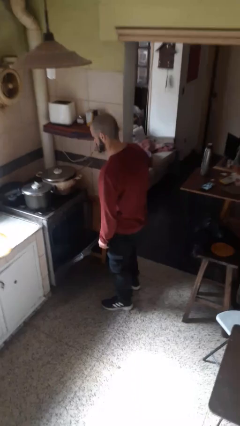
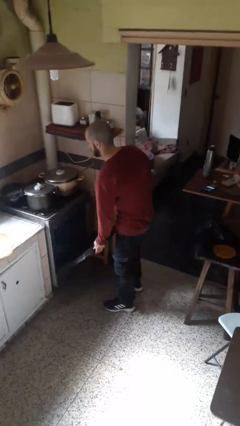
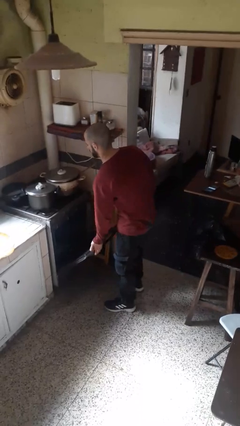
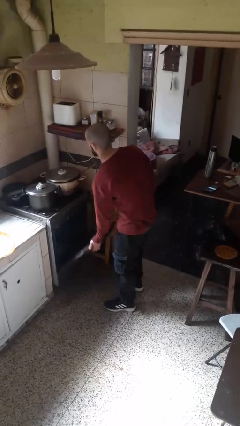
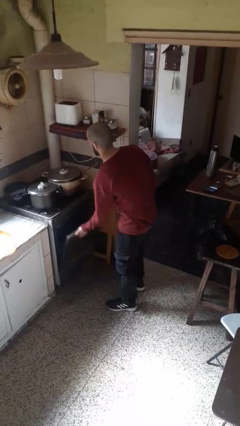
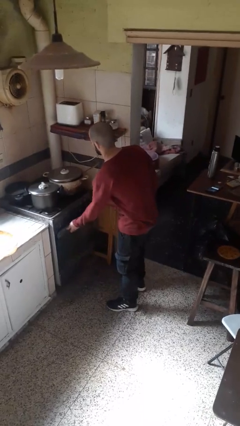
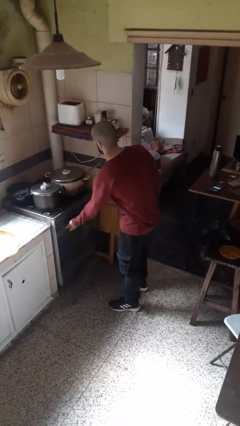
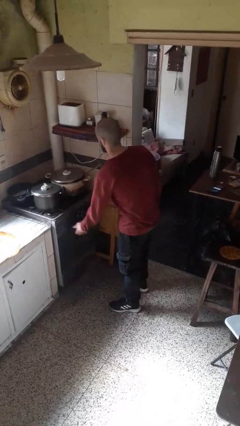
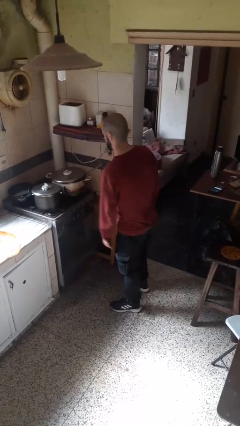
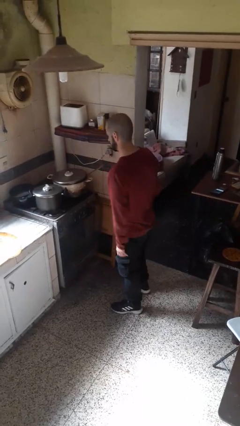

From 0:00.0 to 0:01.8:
person closes oven door

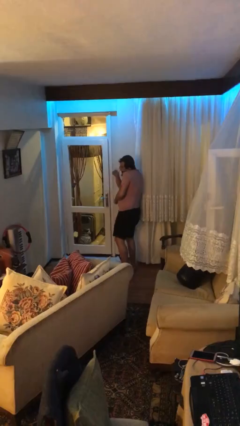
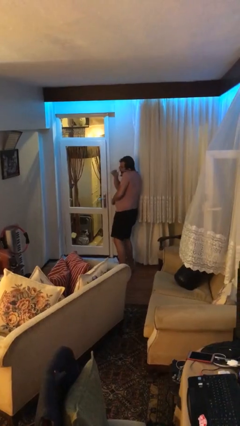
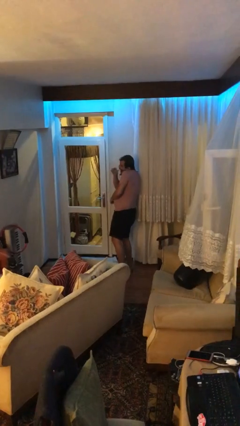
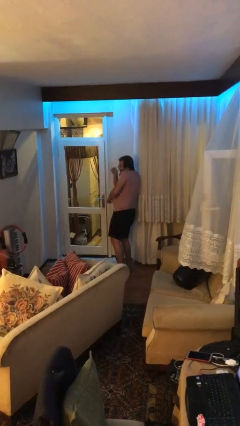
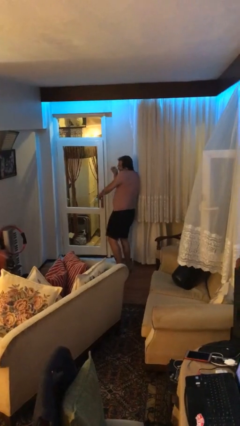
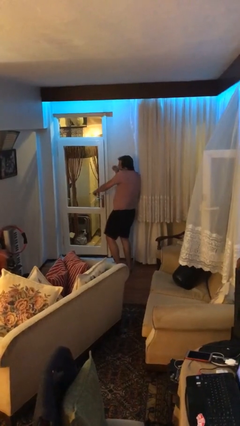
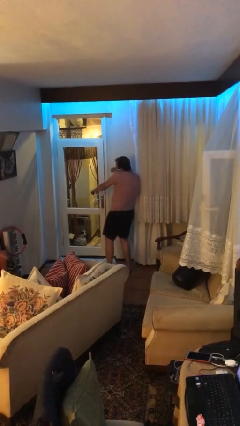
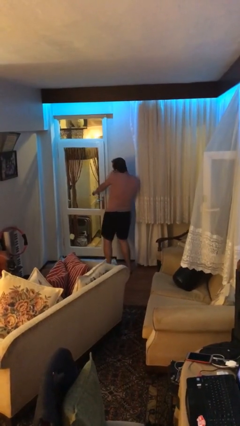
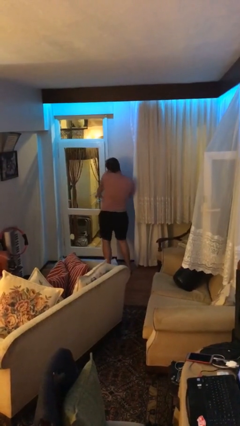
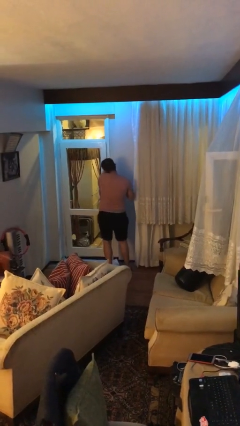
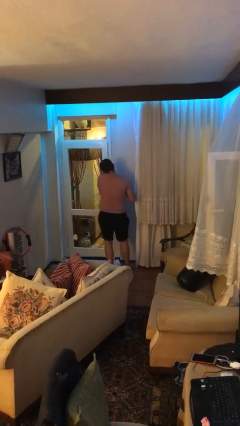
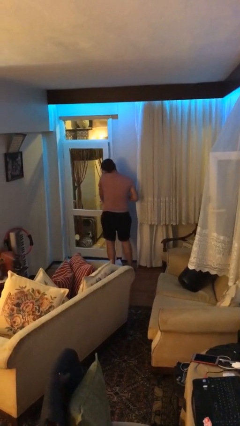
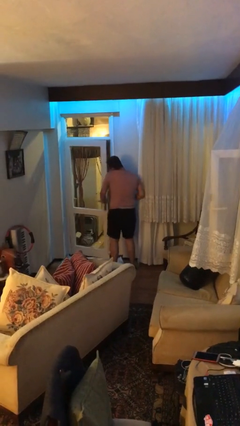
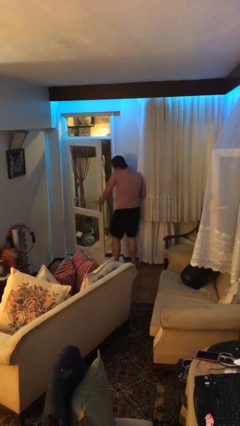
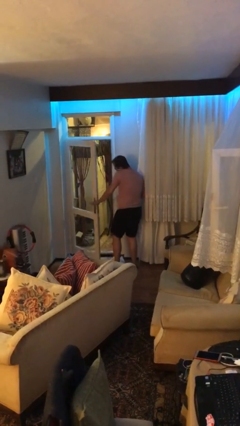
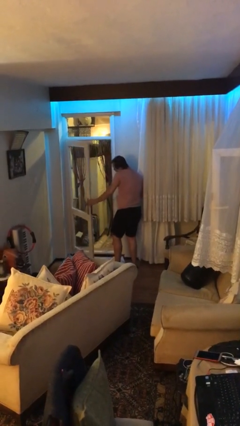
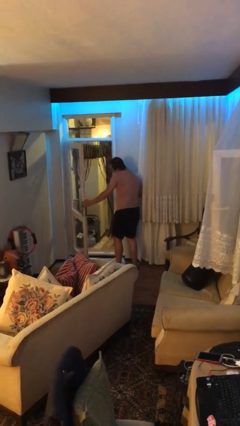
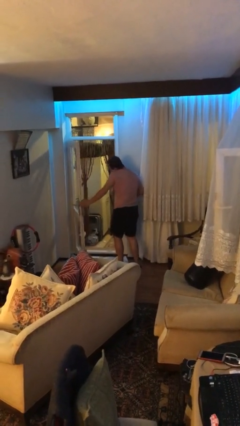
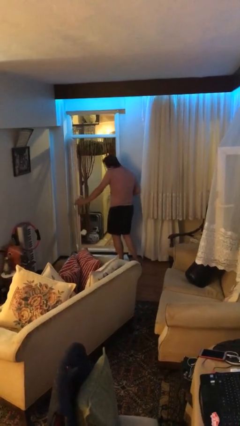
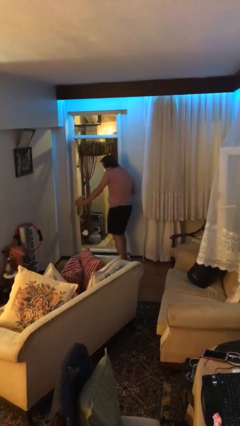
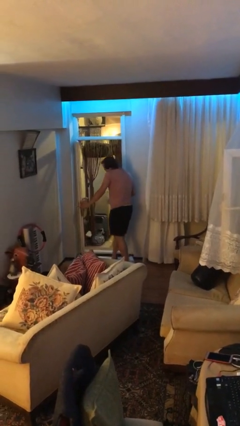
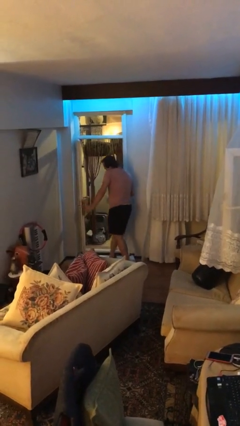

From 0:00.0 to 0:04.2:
person opens facility door

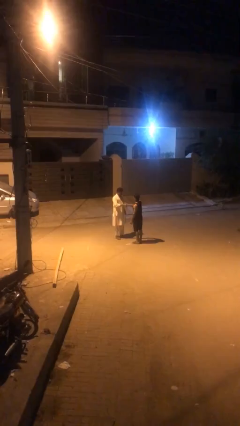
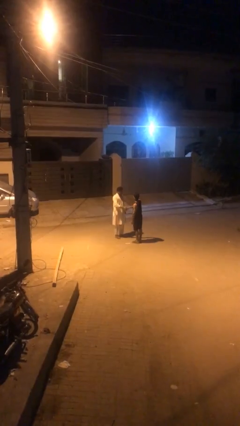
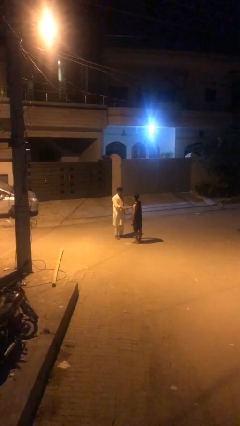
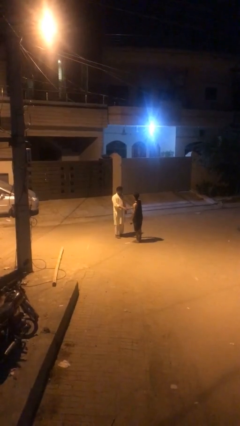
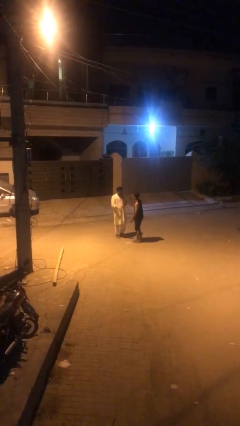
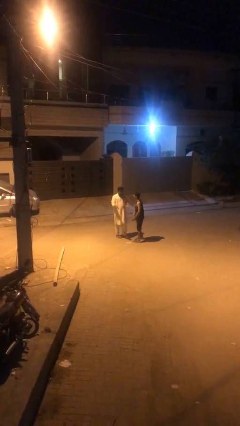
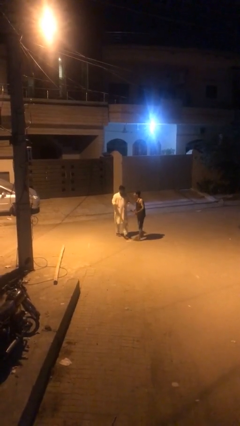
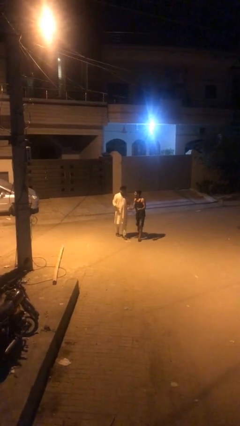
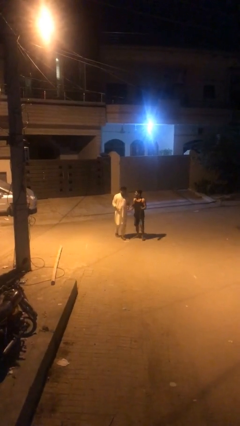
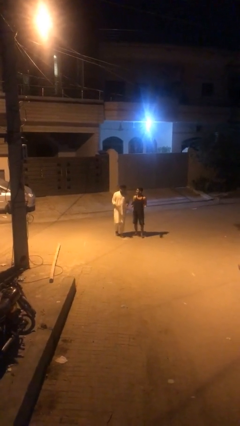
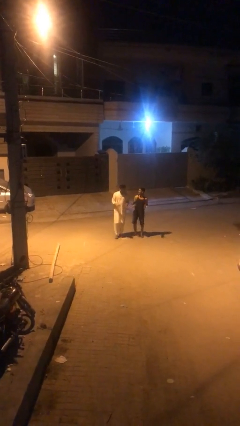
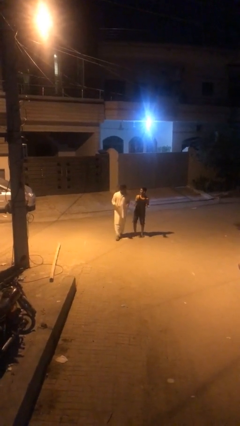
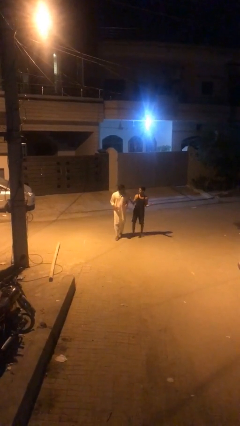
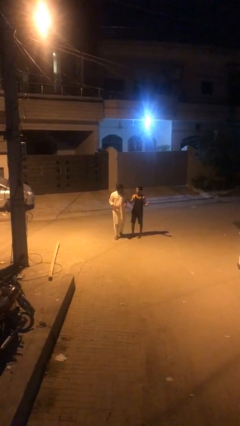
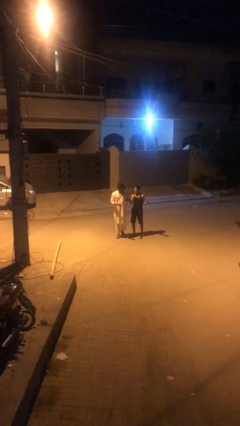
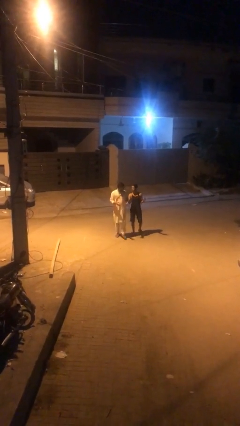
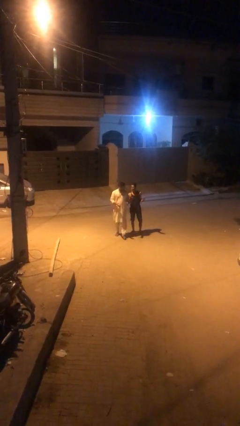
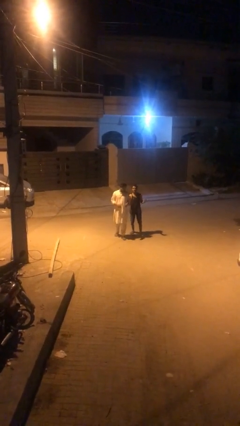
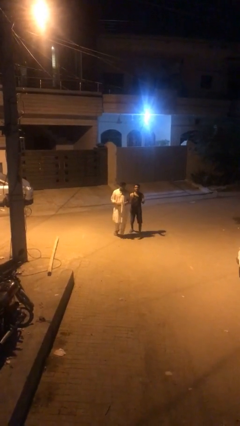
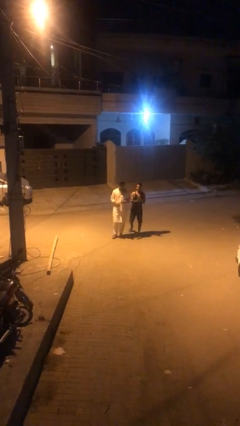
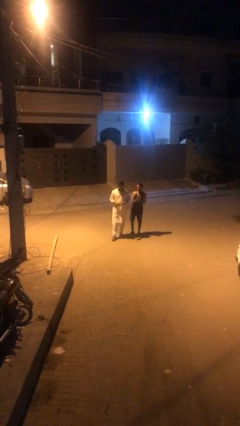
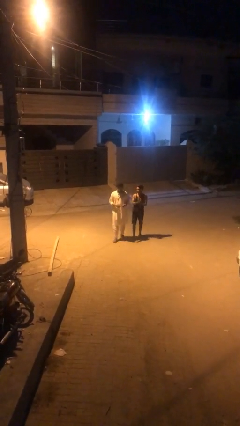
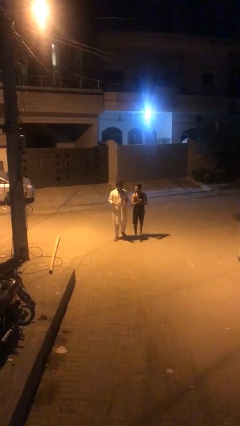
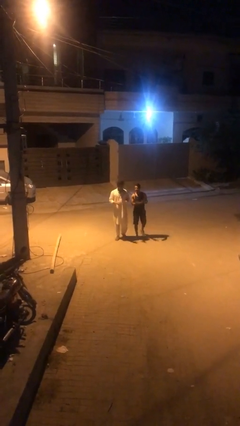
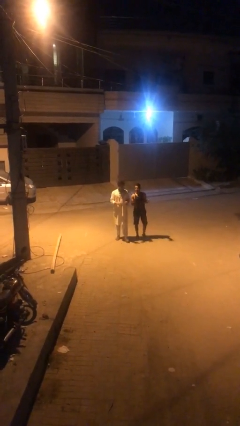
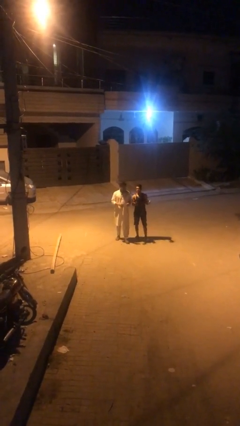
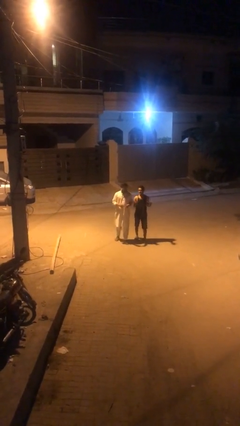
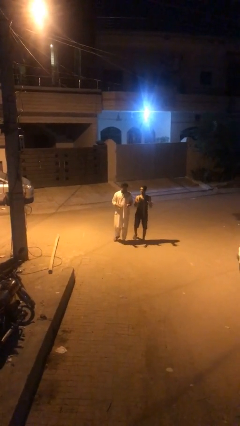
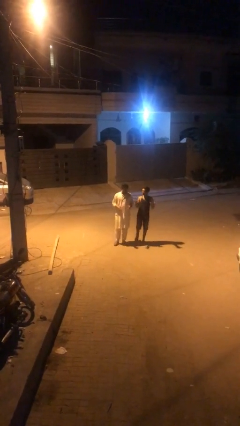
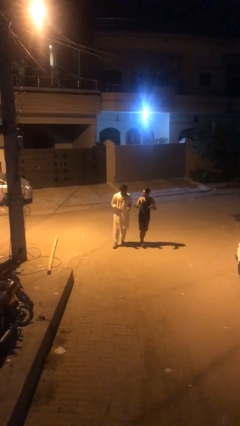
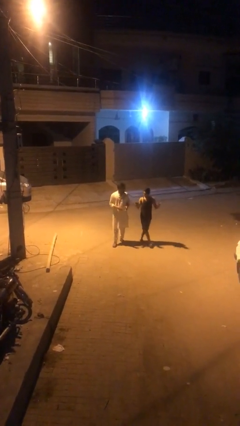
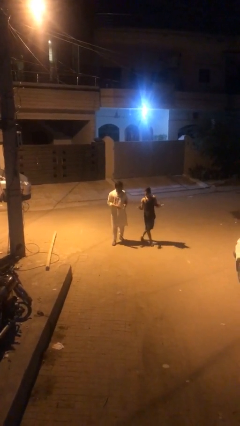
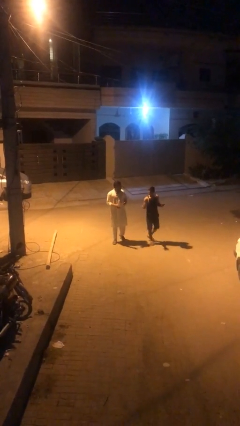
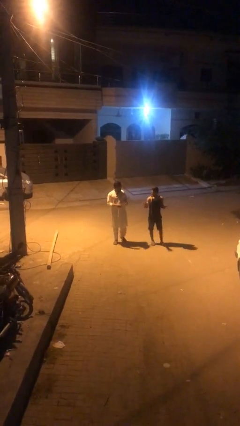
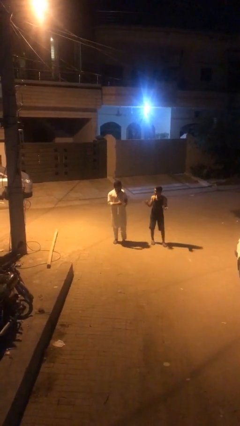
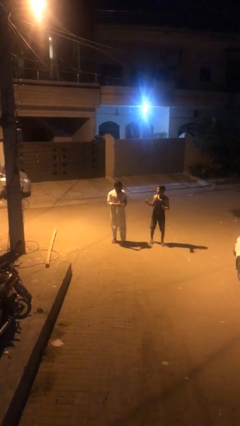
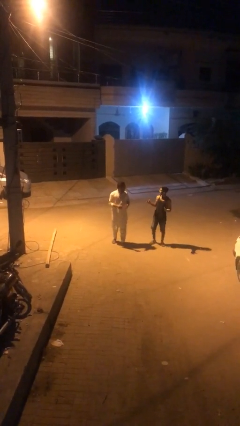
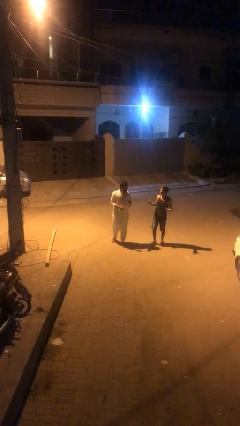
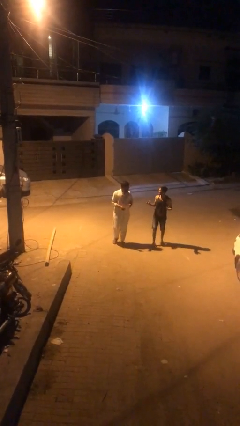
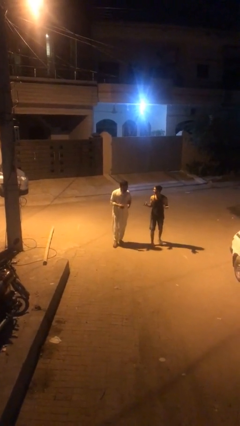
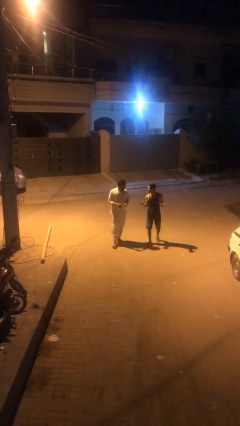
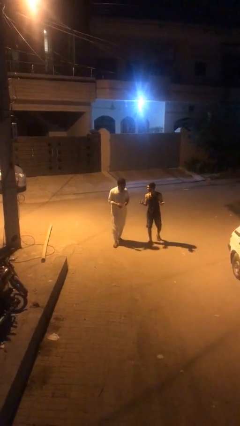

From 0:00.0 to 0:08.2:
person talks to person

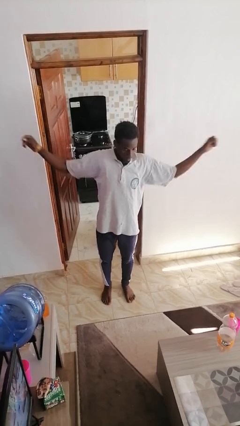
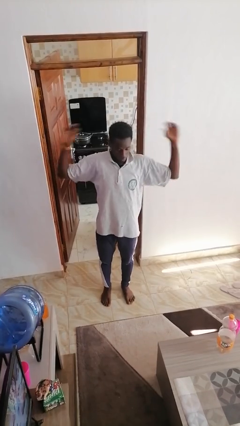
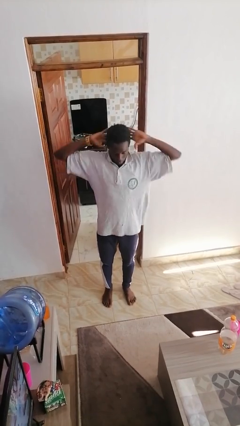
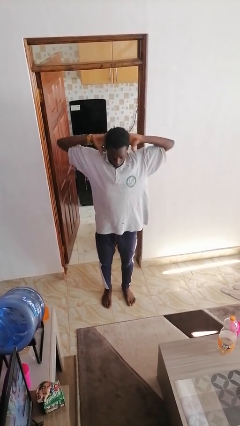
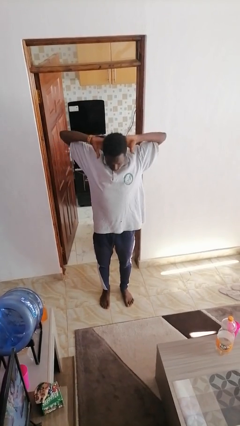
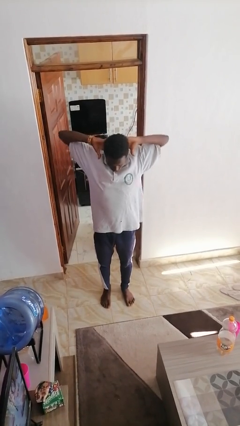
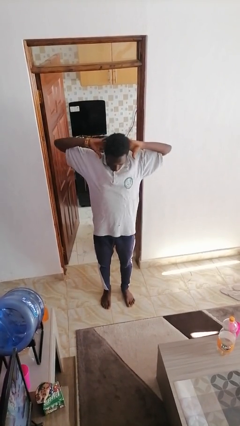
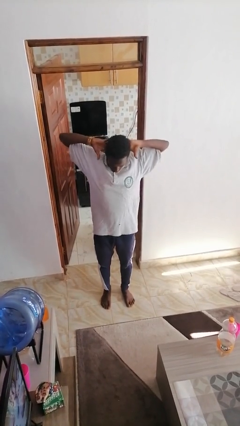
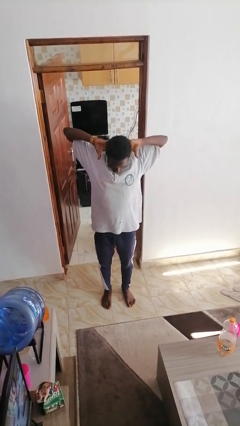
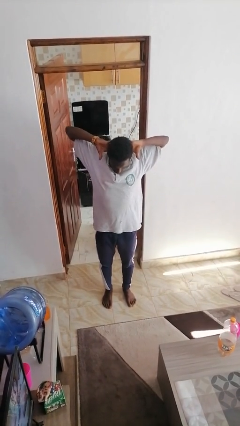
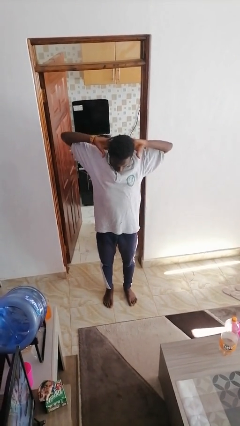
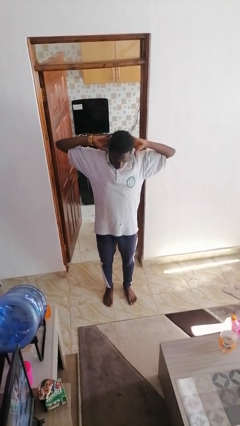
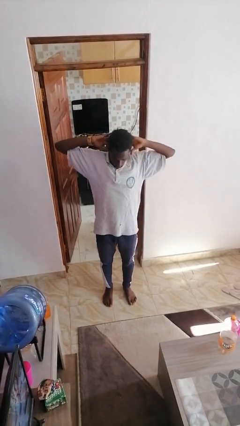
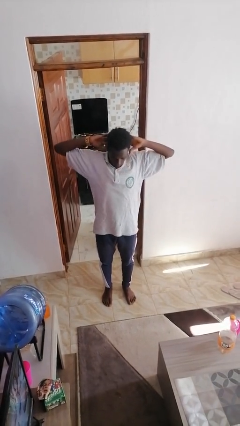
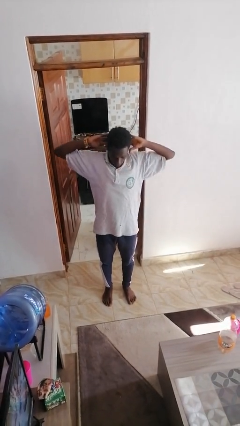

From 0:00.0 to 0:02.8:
person stretches arms over head

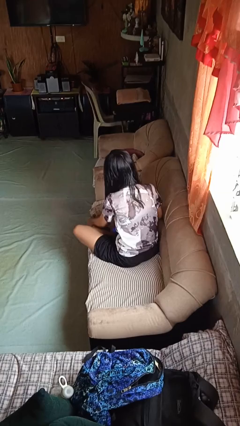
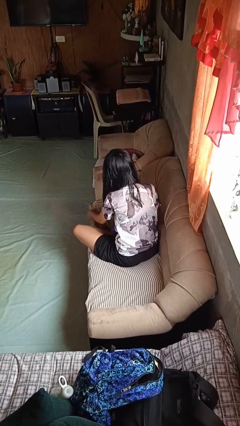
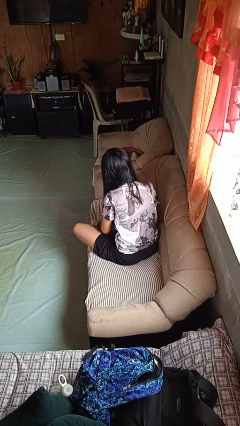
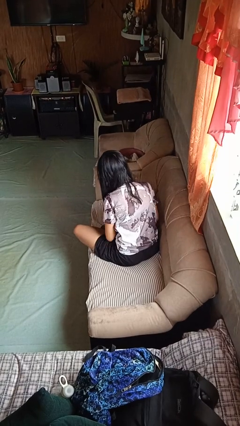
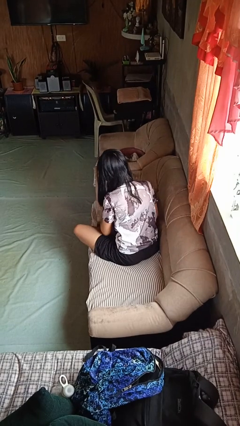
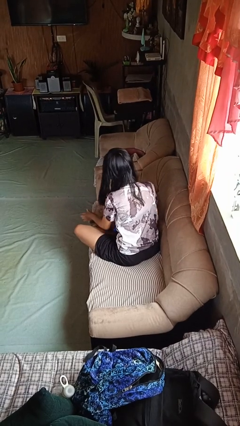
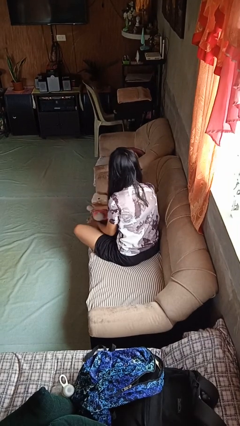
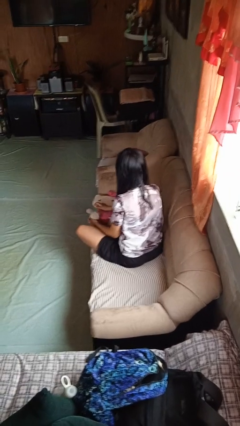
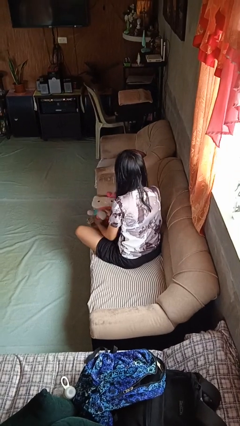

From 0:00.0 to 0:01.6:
person searches in couch
